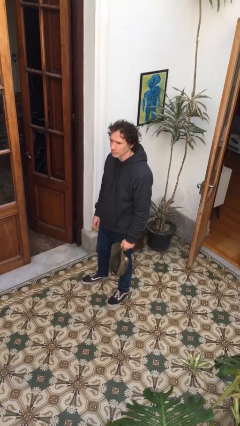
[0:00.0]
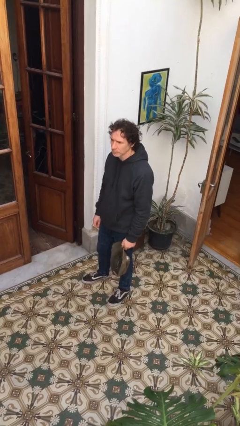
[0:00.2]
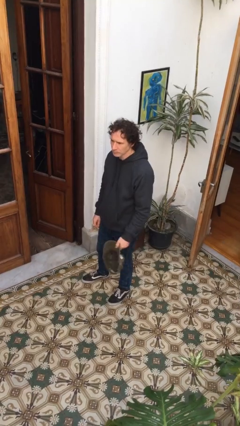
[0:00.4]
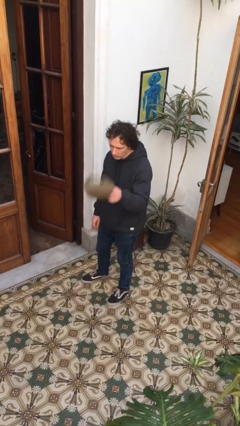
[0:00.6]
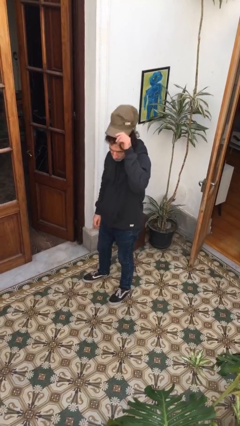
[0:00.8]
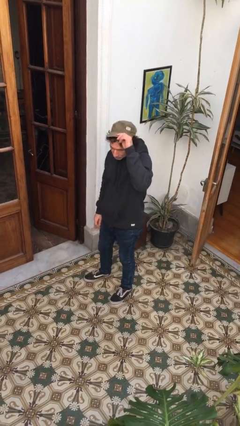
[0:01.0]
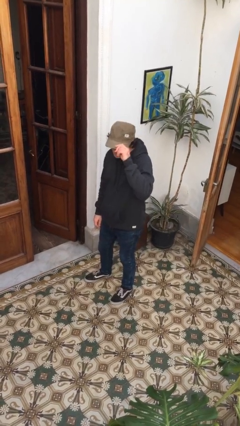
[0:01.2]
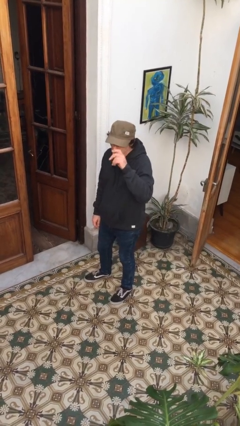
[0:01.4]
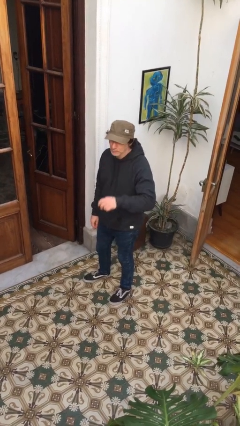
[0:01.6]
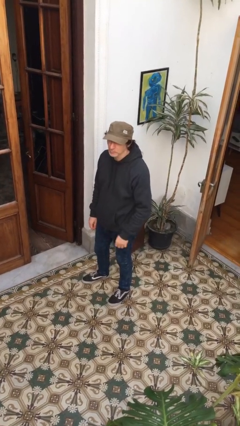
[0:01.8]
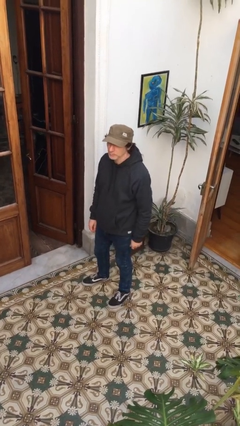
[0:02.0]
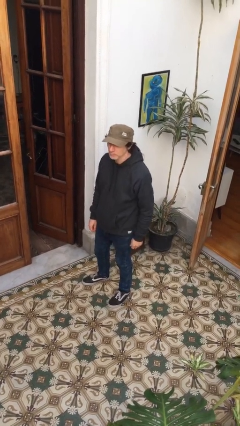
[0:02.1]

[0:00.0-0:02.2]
person puts on hat

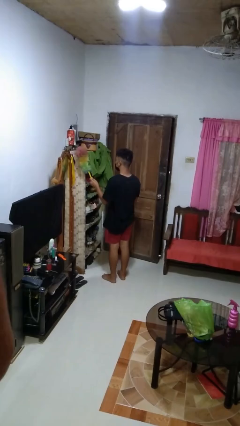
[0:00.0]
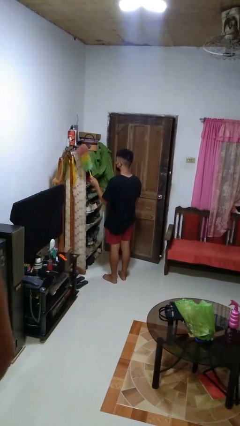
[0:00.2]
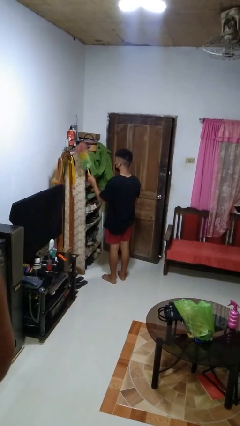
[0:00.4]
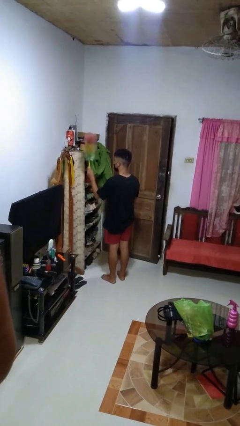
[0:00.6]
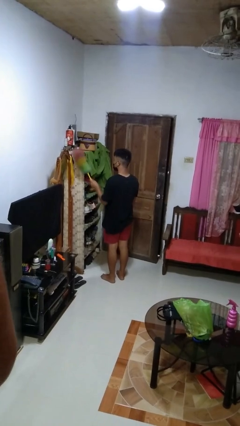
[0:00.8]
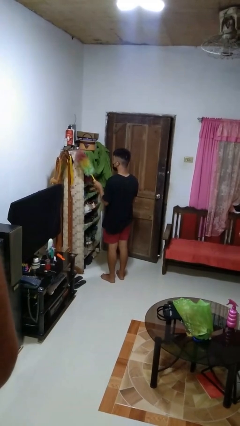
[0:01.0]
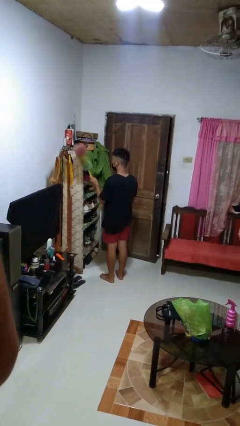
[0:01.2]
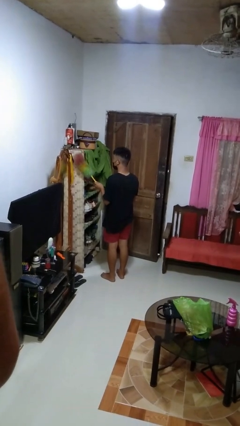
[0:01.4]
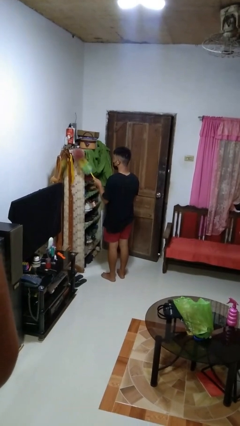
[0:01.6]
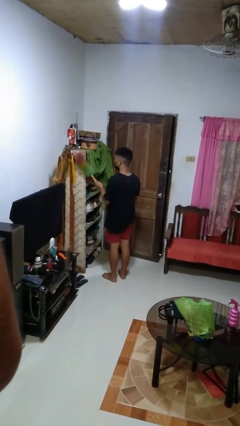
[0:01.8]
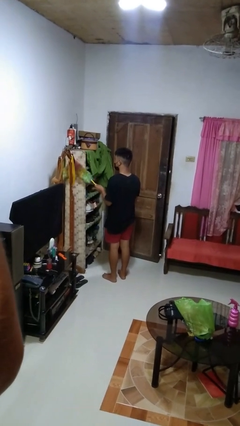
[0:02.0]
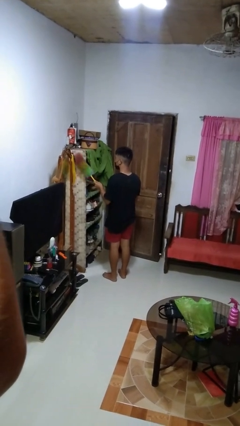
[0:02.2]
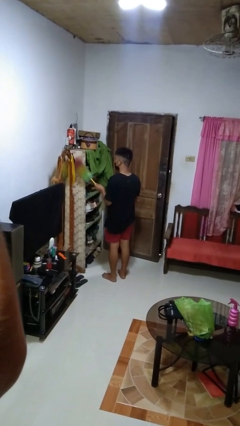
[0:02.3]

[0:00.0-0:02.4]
person dusts furniture

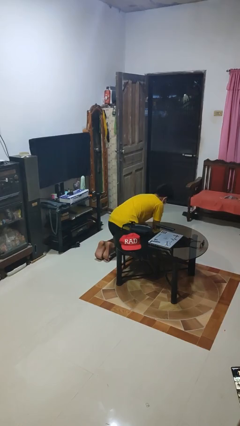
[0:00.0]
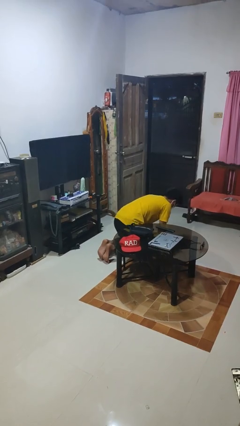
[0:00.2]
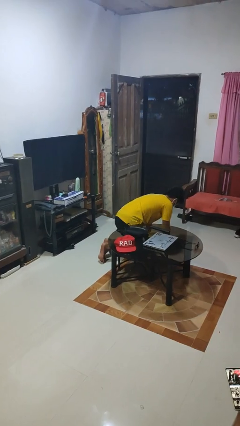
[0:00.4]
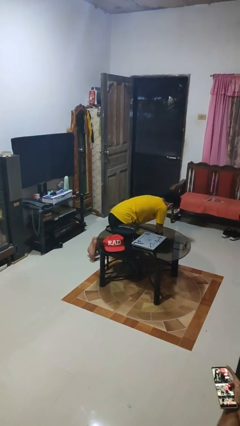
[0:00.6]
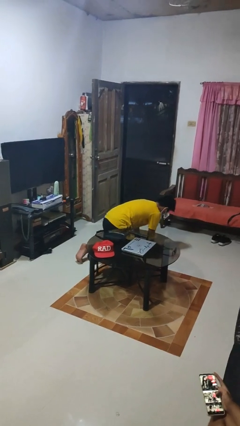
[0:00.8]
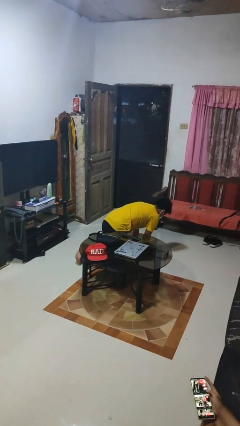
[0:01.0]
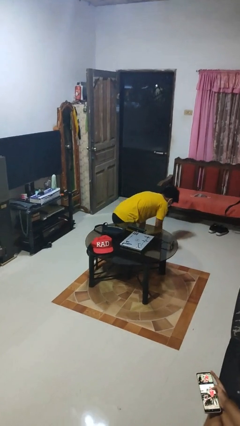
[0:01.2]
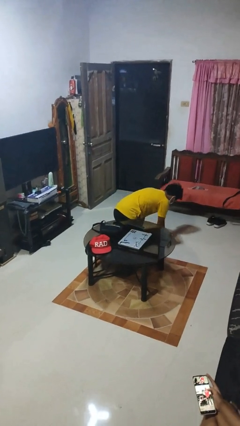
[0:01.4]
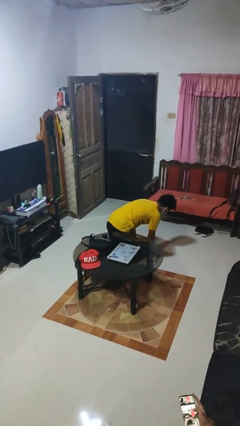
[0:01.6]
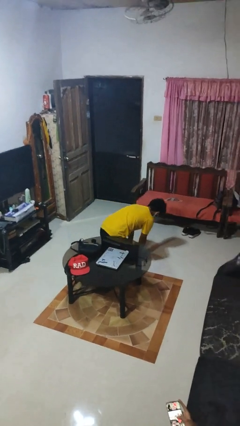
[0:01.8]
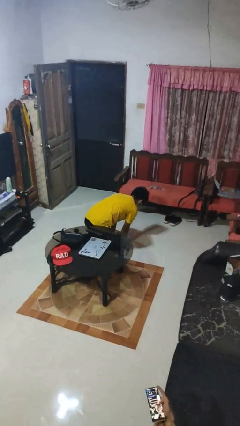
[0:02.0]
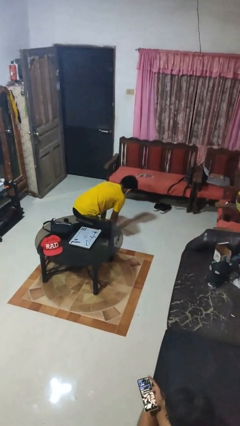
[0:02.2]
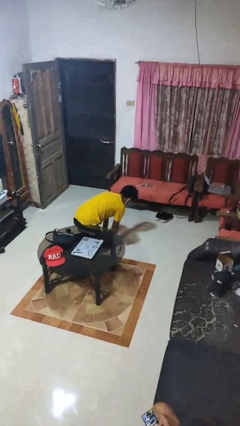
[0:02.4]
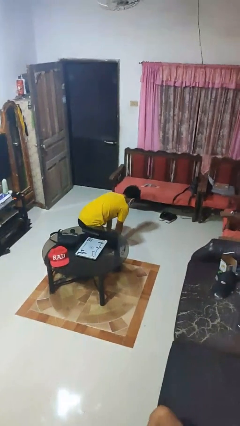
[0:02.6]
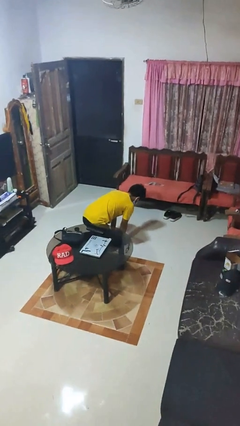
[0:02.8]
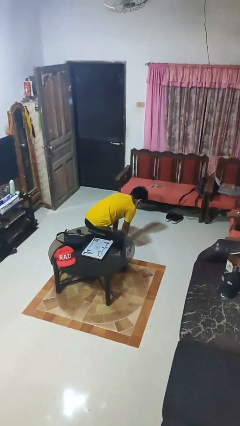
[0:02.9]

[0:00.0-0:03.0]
person crawls

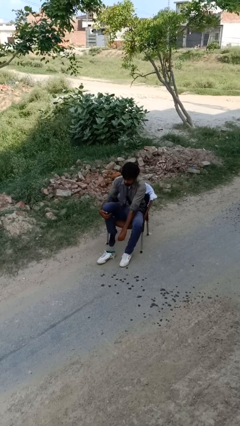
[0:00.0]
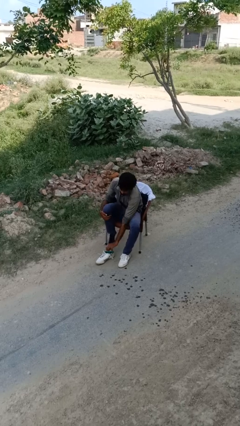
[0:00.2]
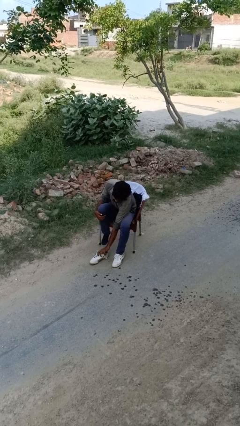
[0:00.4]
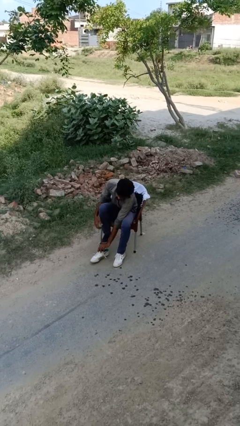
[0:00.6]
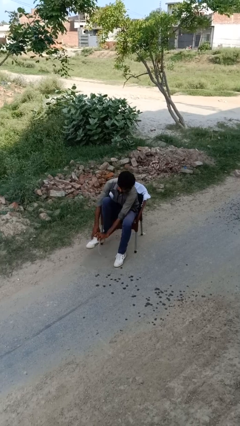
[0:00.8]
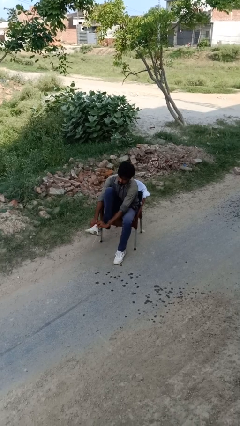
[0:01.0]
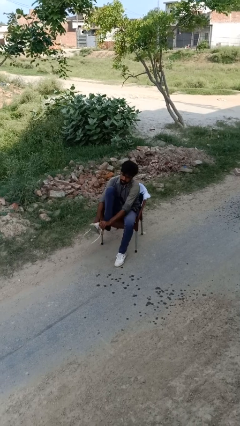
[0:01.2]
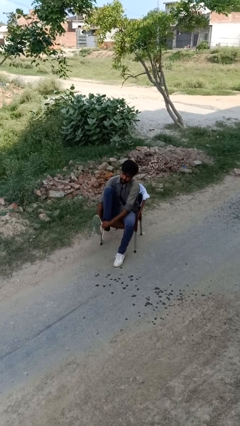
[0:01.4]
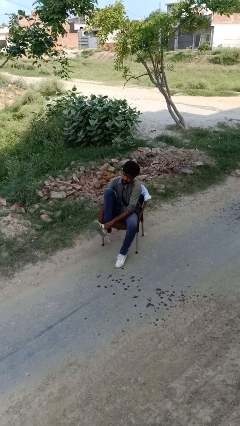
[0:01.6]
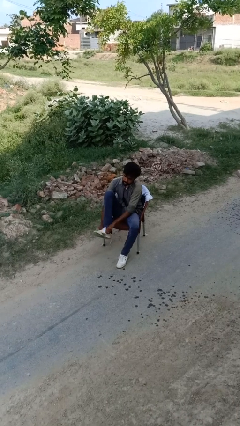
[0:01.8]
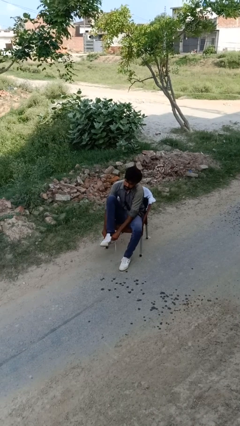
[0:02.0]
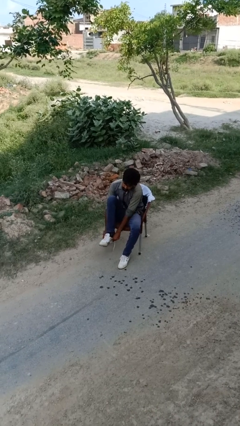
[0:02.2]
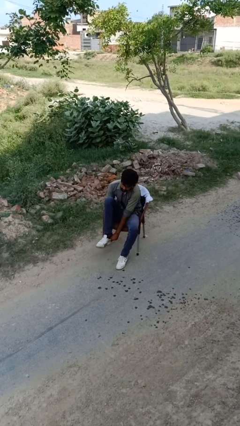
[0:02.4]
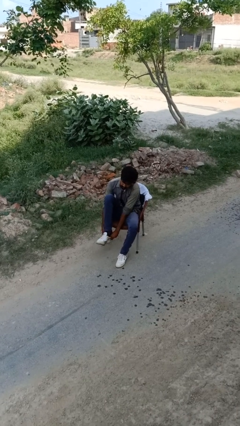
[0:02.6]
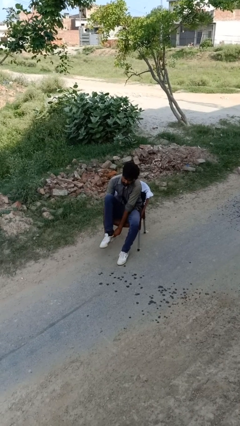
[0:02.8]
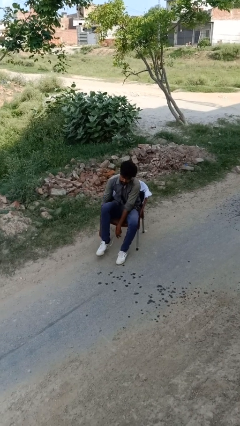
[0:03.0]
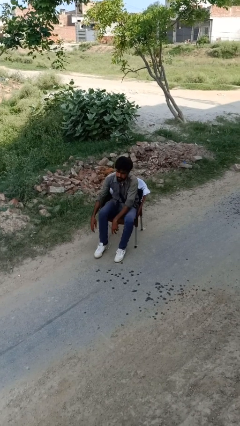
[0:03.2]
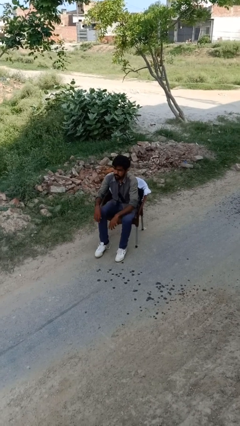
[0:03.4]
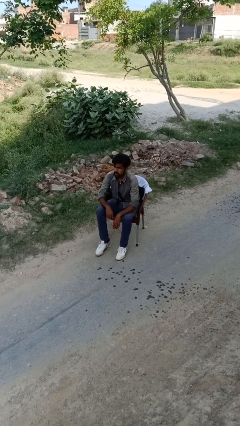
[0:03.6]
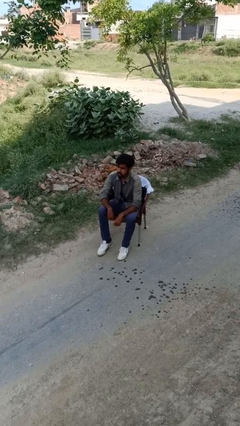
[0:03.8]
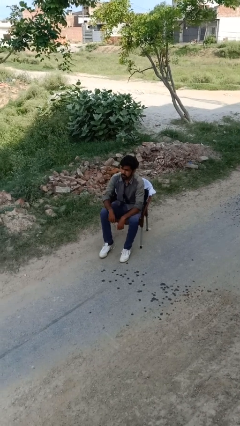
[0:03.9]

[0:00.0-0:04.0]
person puts on shoes

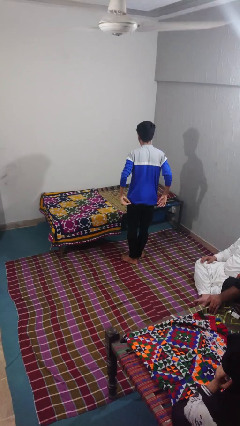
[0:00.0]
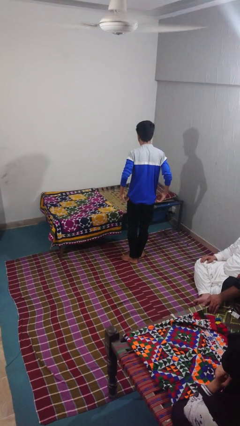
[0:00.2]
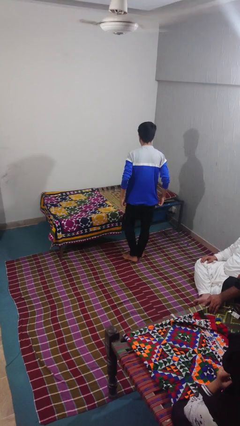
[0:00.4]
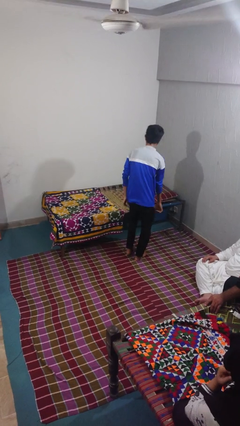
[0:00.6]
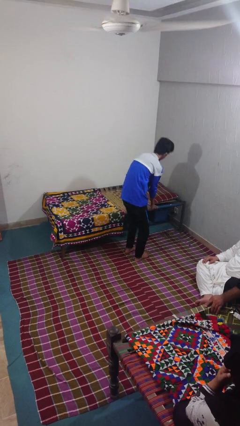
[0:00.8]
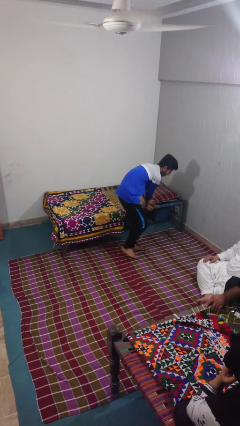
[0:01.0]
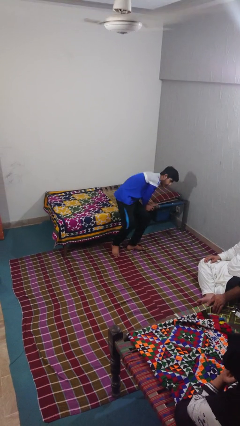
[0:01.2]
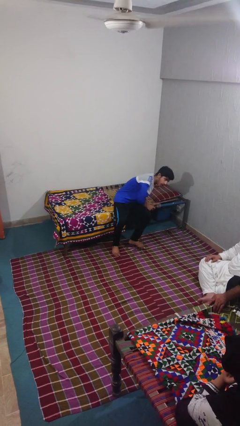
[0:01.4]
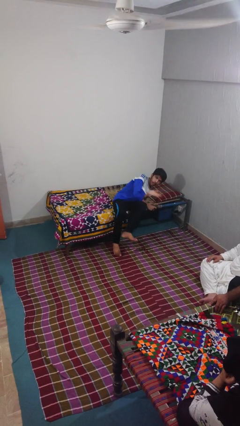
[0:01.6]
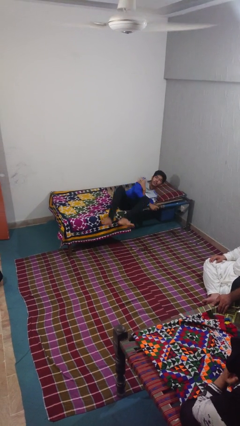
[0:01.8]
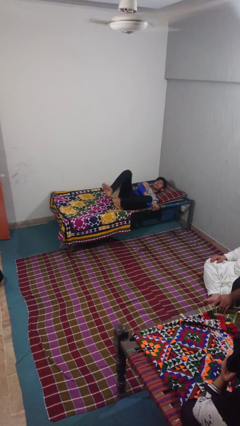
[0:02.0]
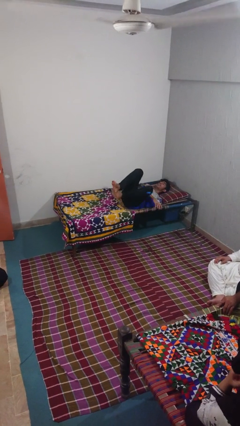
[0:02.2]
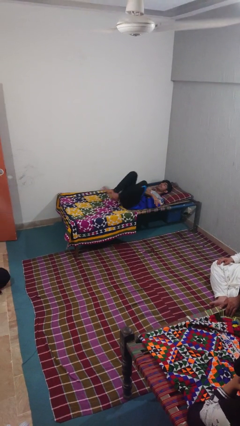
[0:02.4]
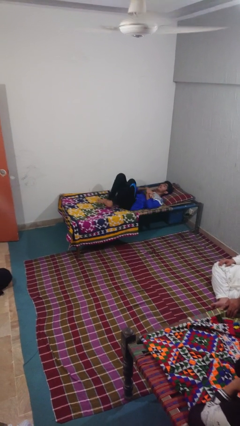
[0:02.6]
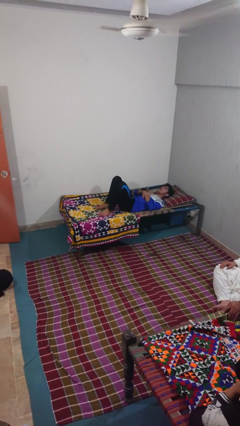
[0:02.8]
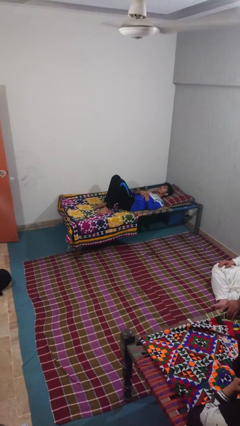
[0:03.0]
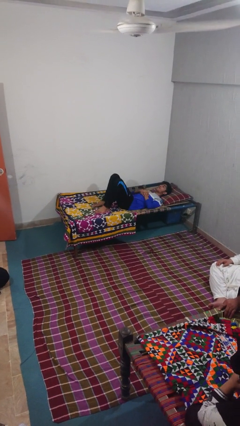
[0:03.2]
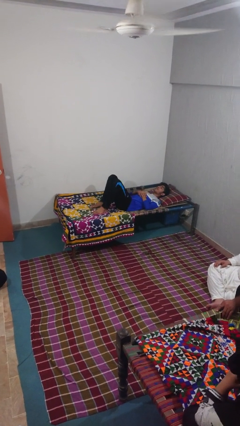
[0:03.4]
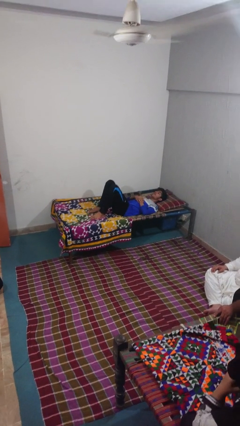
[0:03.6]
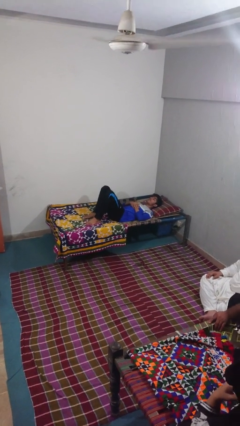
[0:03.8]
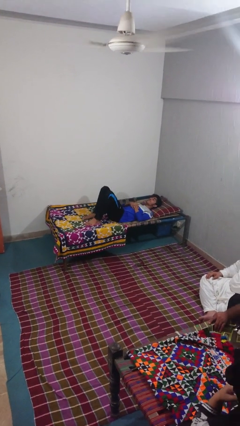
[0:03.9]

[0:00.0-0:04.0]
person lies down on bed

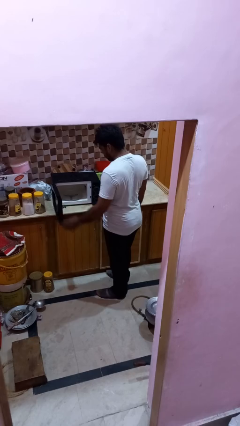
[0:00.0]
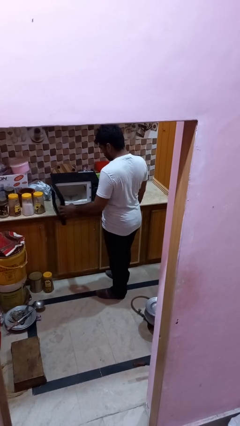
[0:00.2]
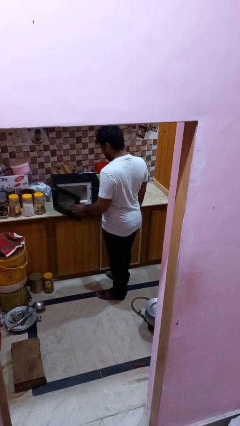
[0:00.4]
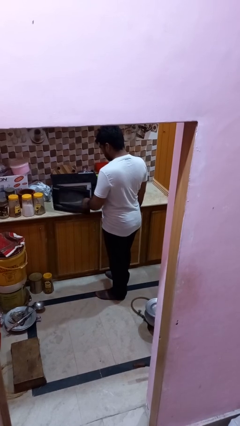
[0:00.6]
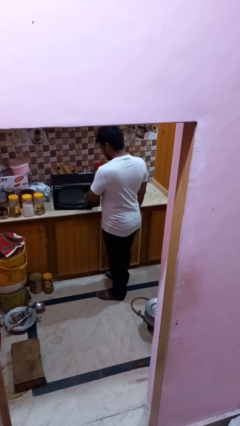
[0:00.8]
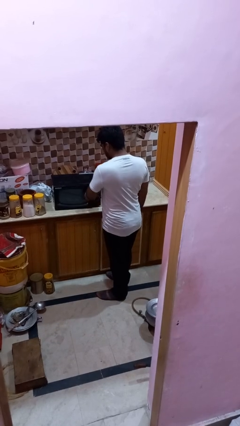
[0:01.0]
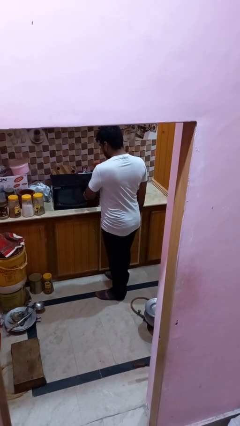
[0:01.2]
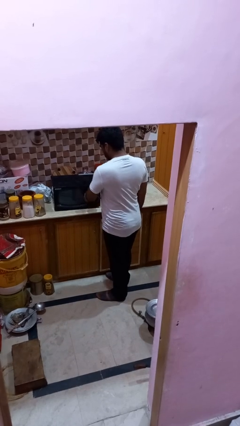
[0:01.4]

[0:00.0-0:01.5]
person closes oven door

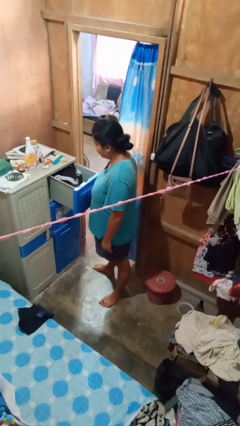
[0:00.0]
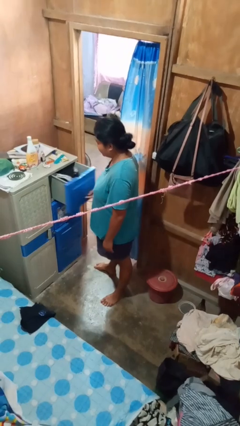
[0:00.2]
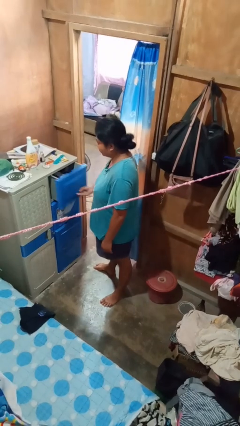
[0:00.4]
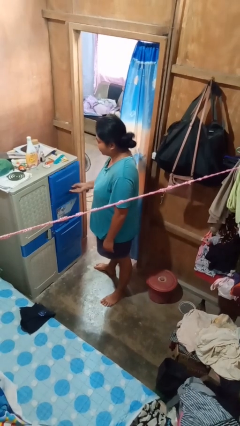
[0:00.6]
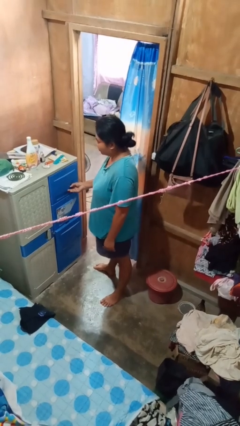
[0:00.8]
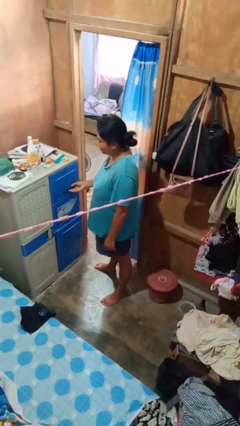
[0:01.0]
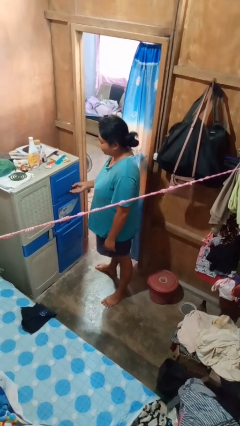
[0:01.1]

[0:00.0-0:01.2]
person closes dresser drawer
